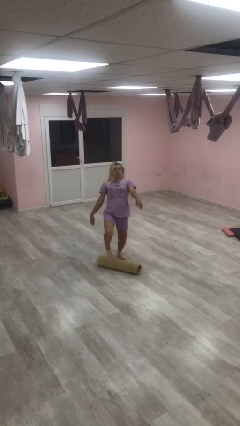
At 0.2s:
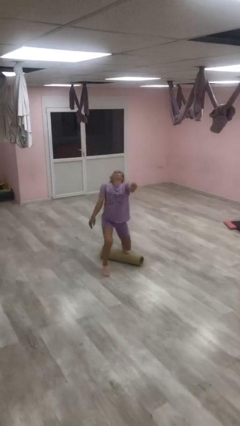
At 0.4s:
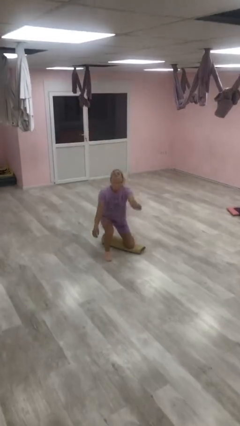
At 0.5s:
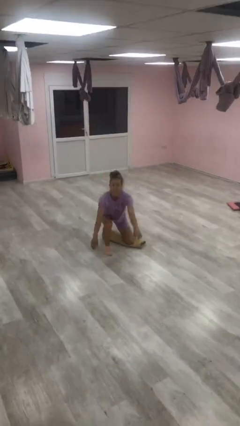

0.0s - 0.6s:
person trips on object on floor

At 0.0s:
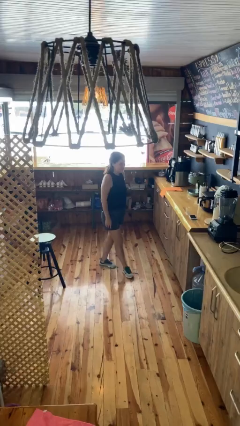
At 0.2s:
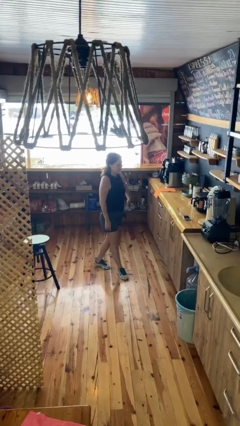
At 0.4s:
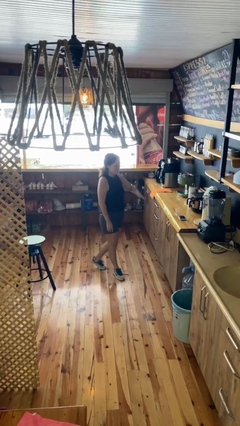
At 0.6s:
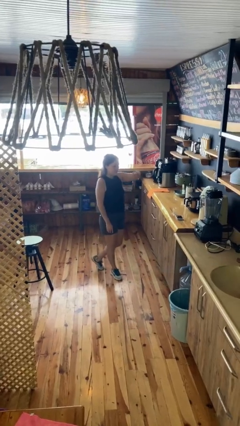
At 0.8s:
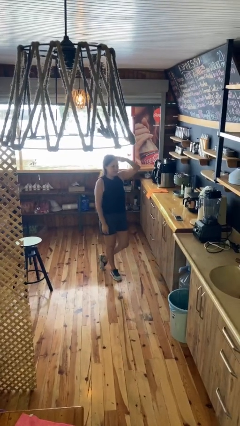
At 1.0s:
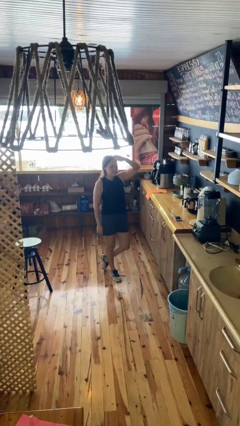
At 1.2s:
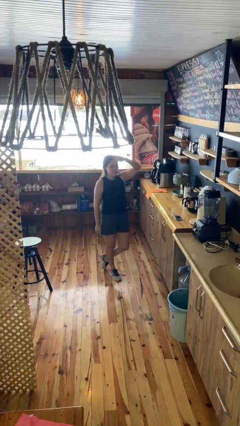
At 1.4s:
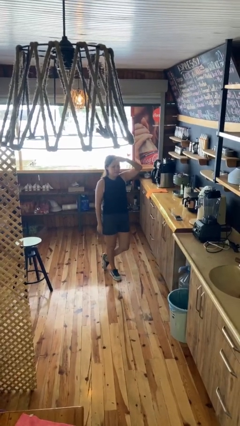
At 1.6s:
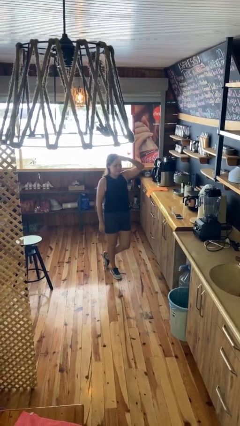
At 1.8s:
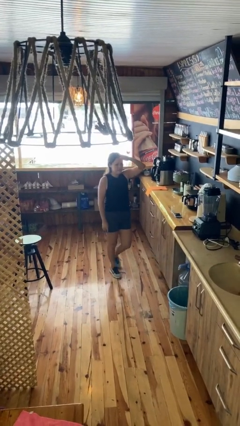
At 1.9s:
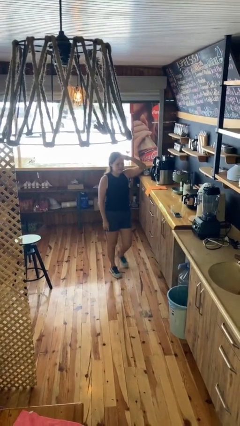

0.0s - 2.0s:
person salutes

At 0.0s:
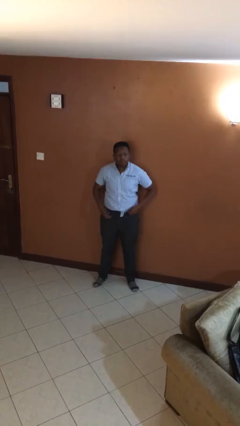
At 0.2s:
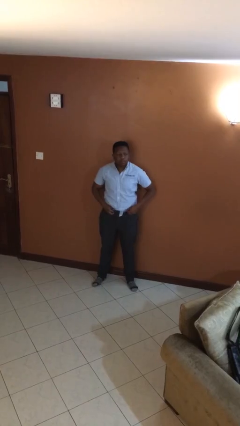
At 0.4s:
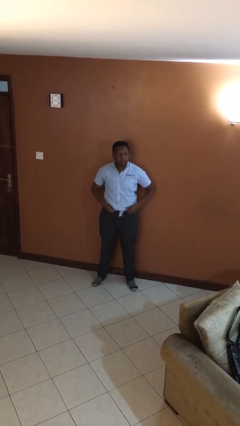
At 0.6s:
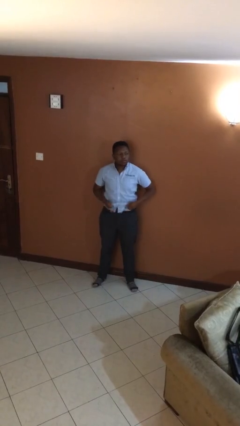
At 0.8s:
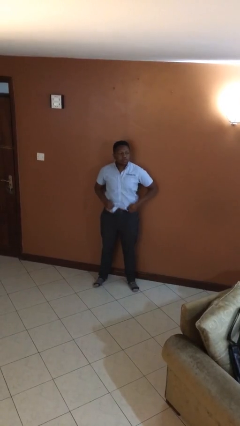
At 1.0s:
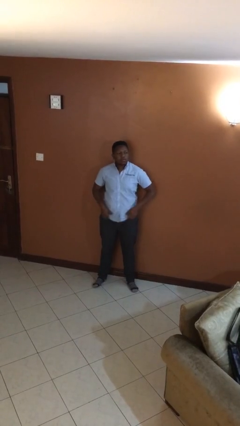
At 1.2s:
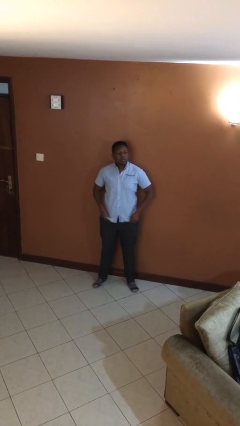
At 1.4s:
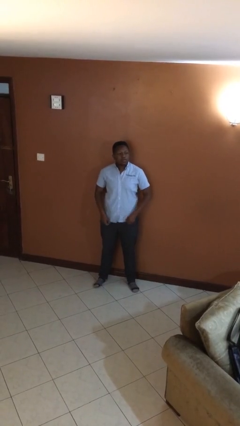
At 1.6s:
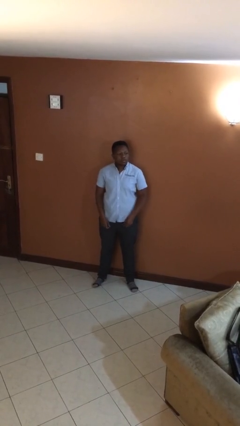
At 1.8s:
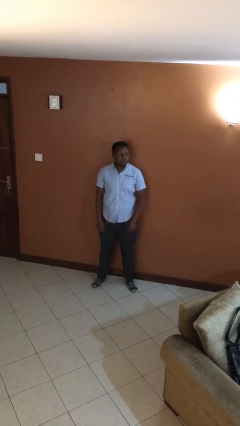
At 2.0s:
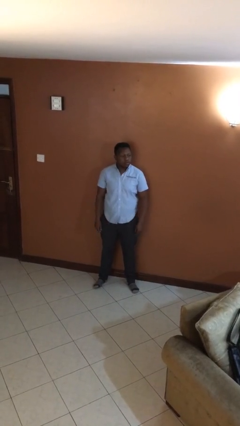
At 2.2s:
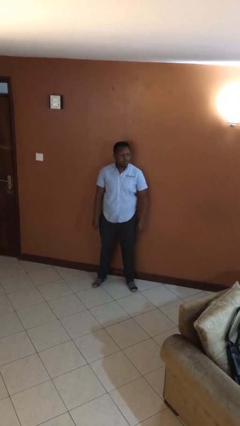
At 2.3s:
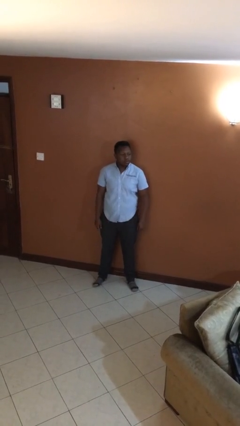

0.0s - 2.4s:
person untucks shirt

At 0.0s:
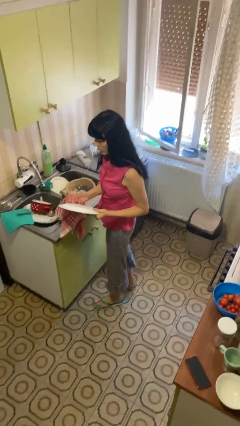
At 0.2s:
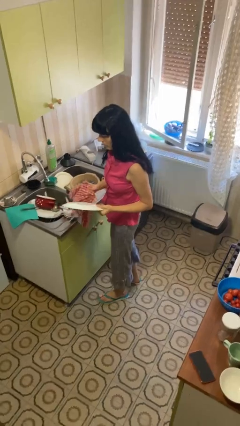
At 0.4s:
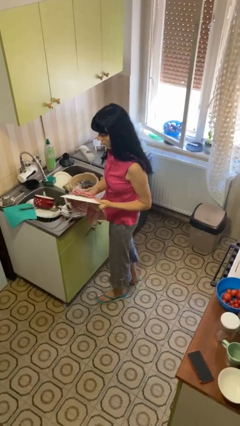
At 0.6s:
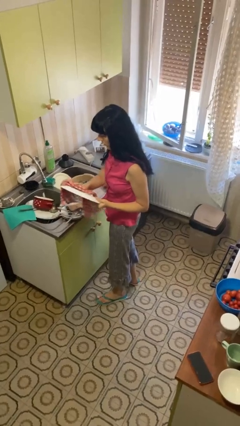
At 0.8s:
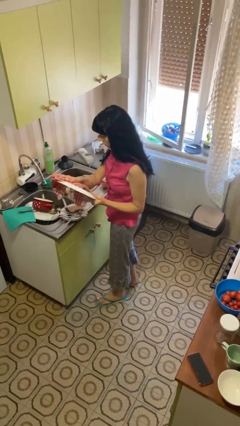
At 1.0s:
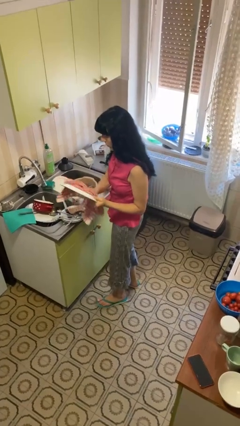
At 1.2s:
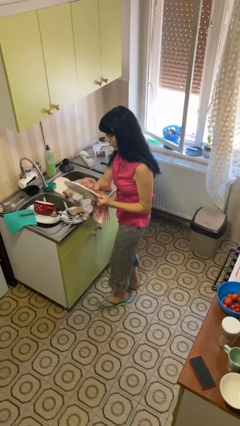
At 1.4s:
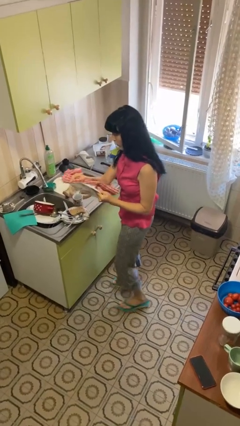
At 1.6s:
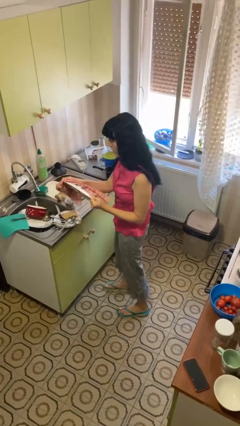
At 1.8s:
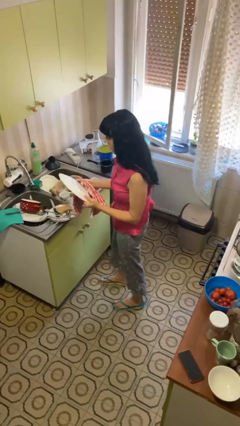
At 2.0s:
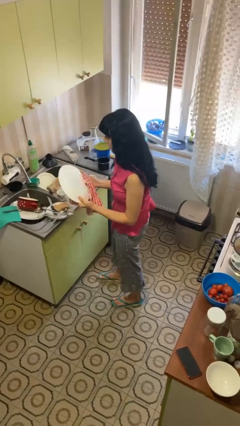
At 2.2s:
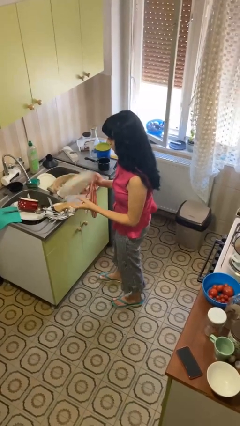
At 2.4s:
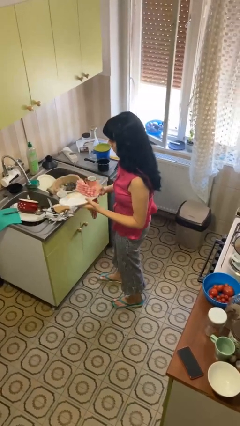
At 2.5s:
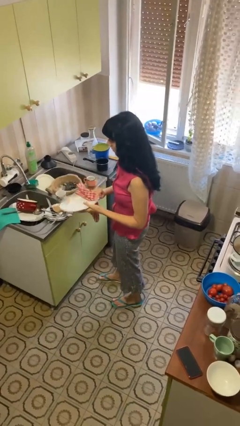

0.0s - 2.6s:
person dries dish

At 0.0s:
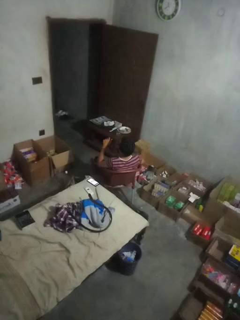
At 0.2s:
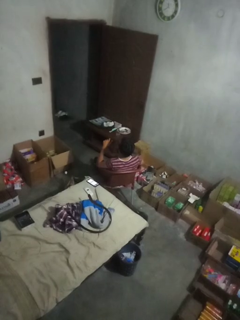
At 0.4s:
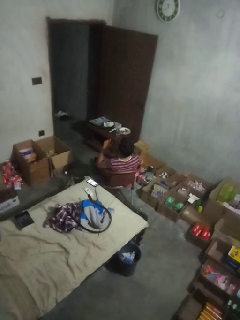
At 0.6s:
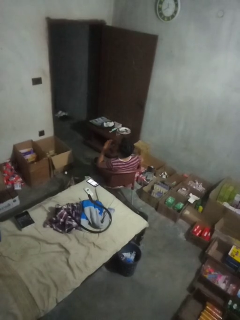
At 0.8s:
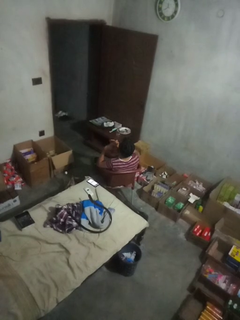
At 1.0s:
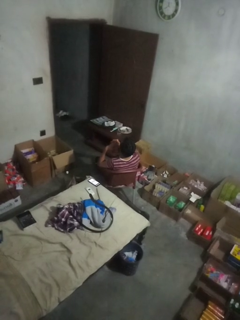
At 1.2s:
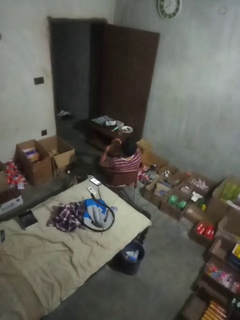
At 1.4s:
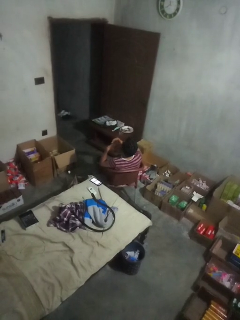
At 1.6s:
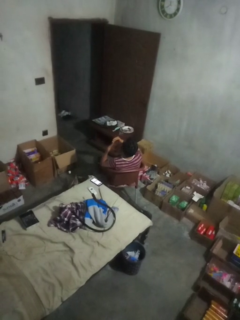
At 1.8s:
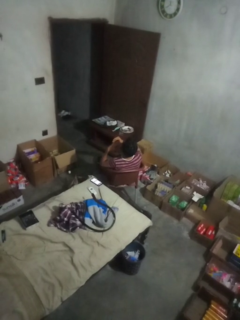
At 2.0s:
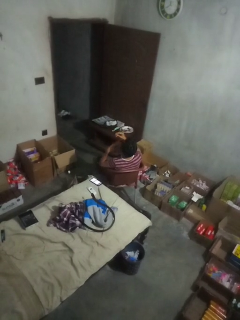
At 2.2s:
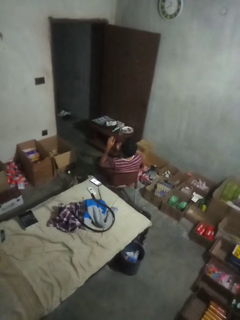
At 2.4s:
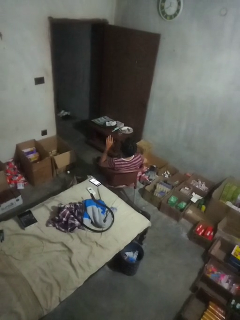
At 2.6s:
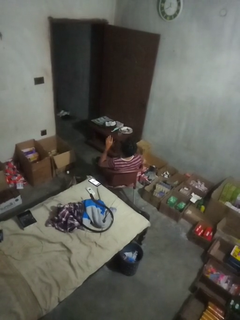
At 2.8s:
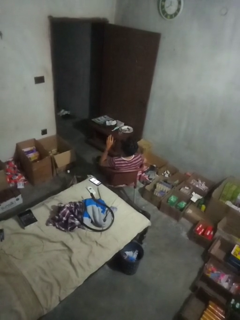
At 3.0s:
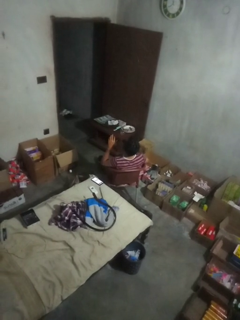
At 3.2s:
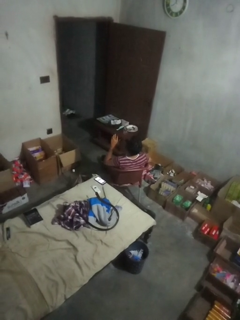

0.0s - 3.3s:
person takes off ring

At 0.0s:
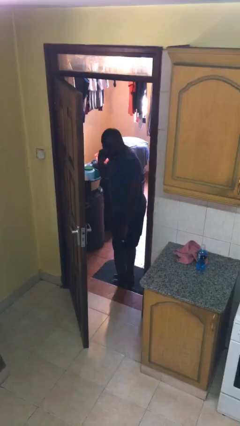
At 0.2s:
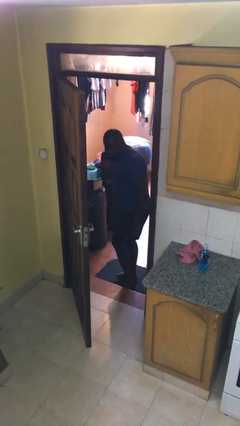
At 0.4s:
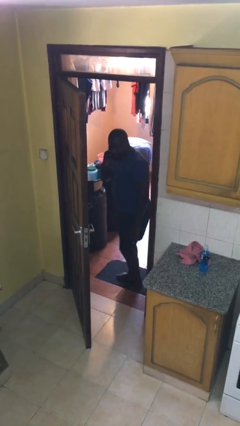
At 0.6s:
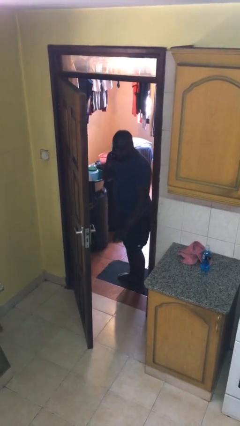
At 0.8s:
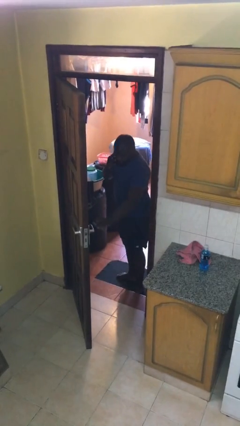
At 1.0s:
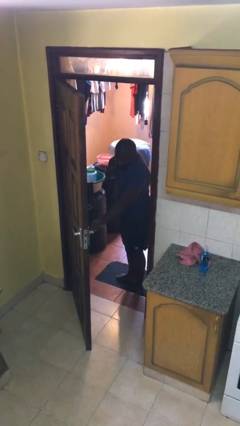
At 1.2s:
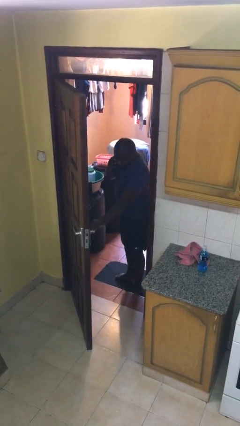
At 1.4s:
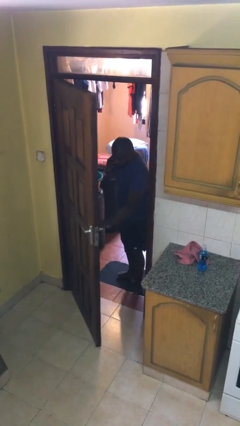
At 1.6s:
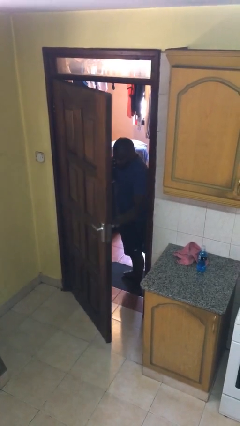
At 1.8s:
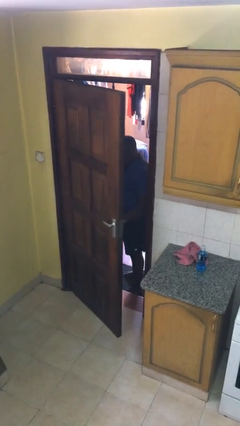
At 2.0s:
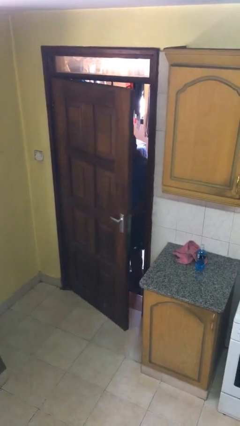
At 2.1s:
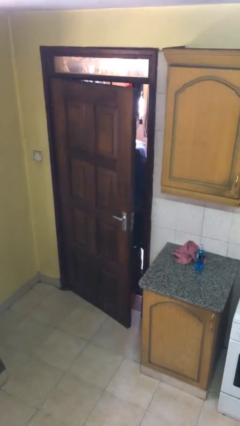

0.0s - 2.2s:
person closes facility door

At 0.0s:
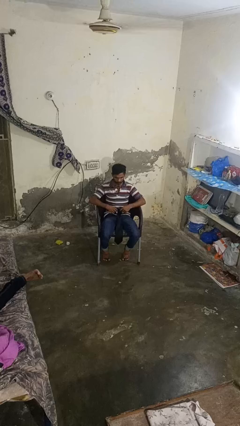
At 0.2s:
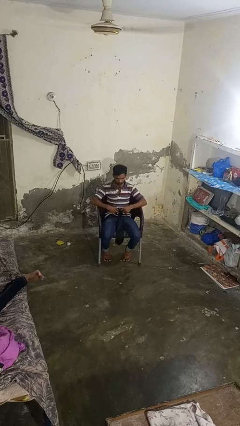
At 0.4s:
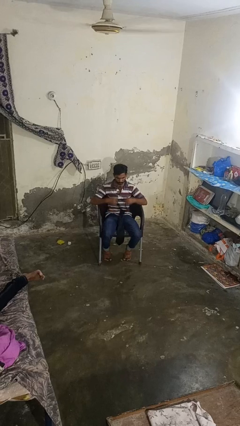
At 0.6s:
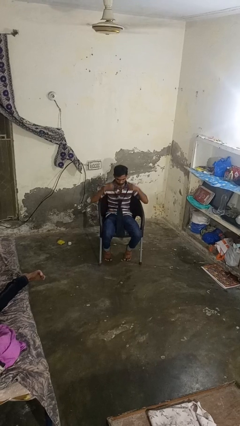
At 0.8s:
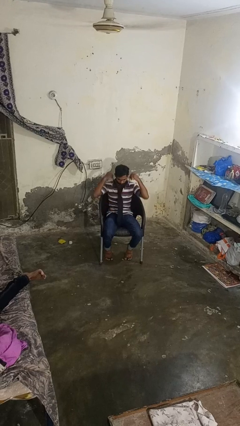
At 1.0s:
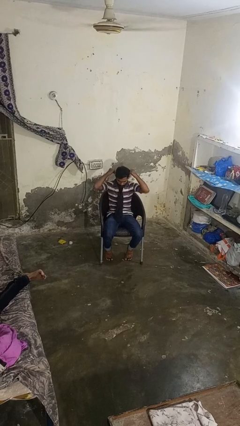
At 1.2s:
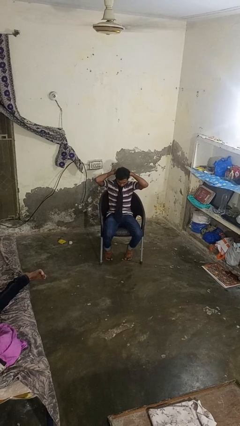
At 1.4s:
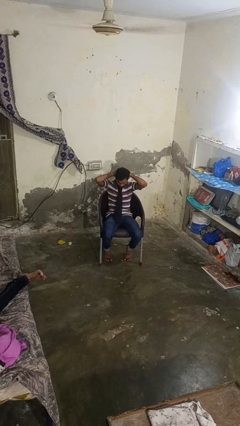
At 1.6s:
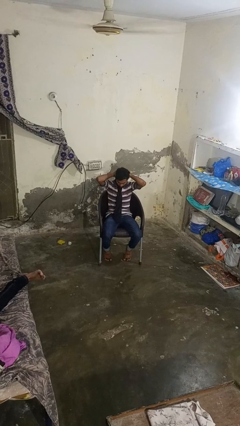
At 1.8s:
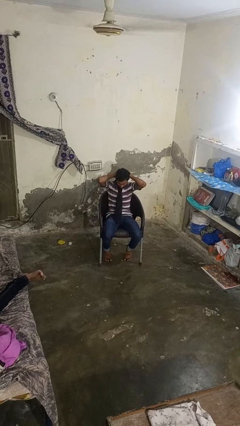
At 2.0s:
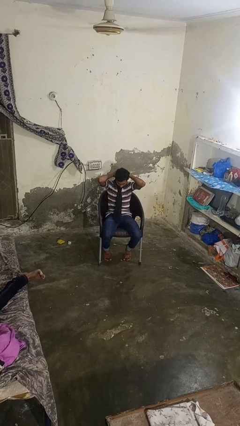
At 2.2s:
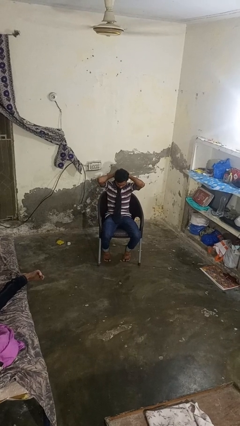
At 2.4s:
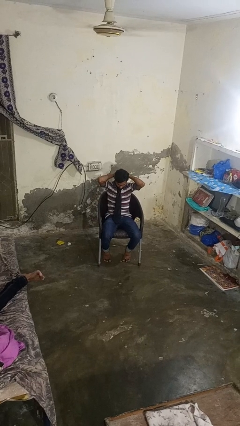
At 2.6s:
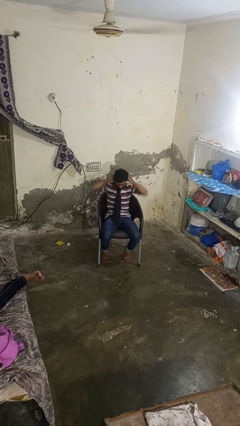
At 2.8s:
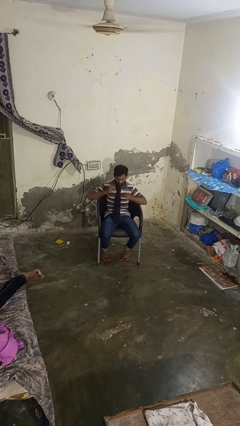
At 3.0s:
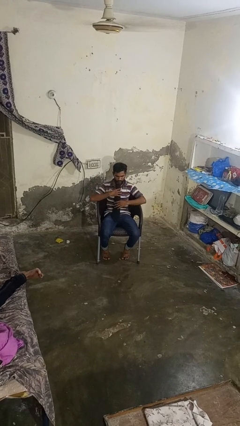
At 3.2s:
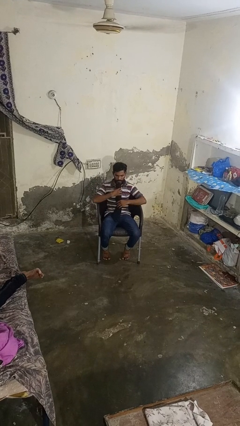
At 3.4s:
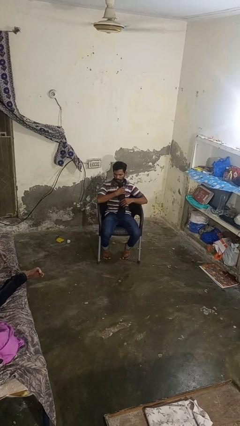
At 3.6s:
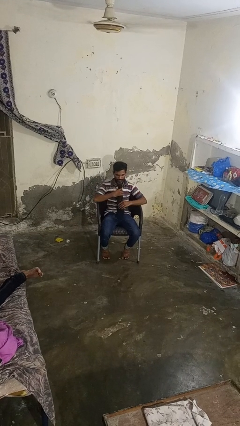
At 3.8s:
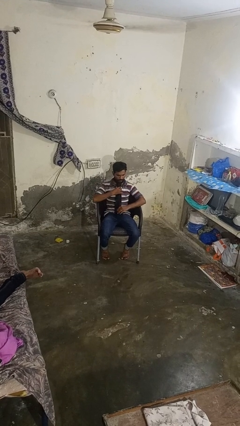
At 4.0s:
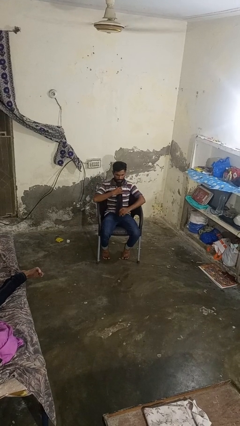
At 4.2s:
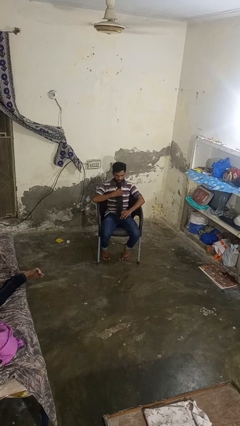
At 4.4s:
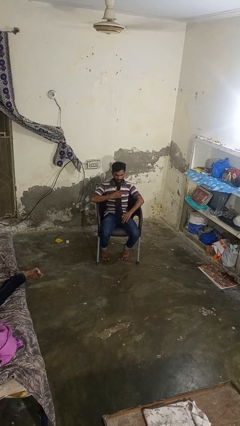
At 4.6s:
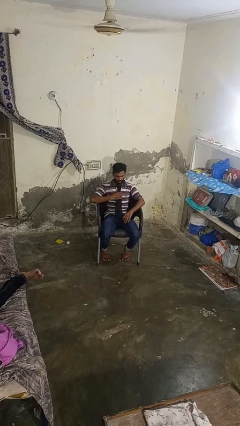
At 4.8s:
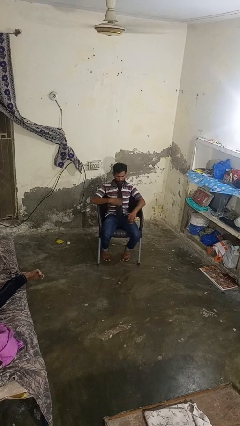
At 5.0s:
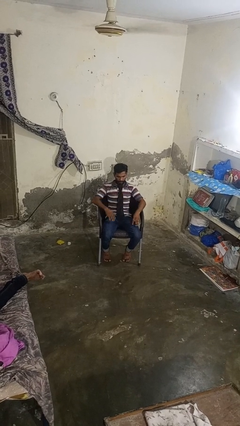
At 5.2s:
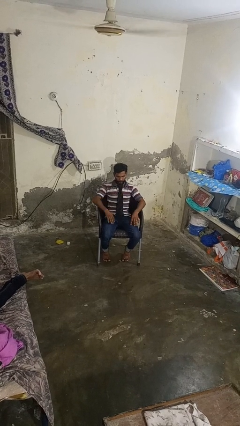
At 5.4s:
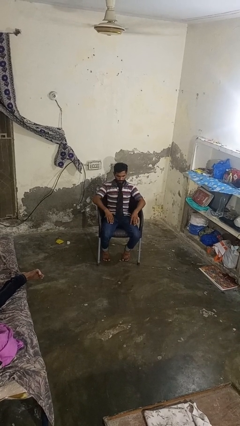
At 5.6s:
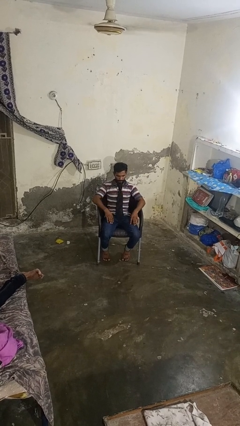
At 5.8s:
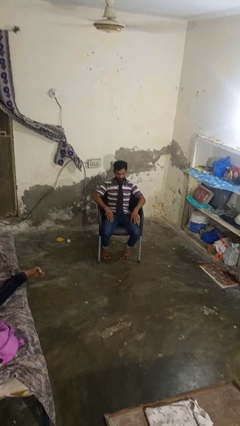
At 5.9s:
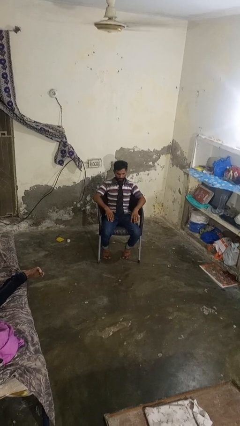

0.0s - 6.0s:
person puts on necktie
